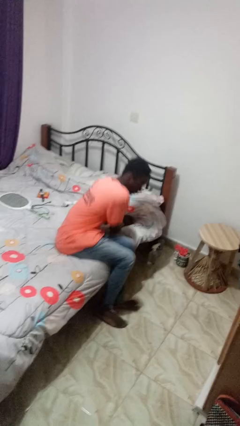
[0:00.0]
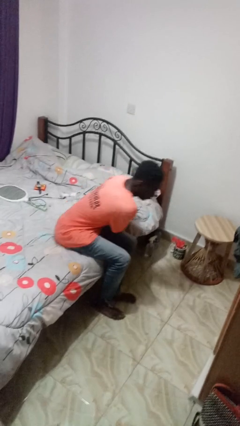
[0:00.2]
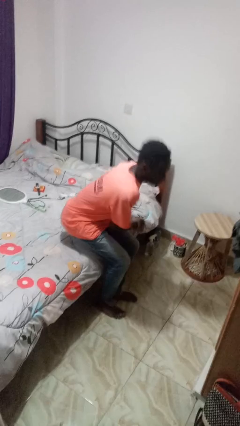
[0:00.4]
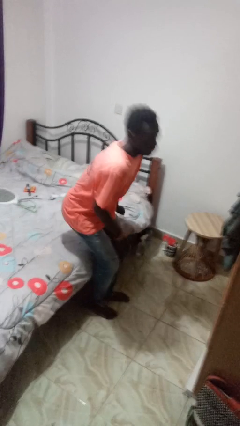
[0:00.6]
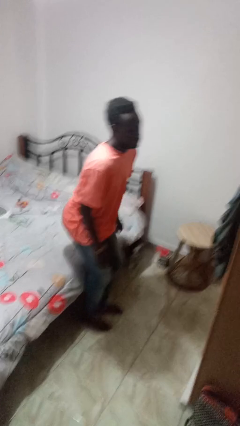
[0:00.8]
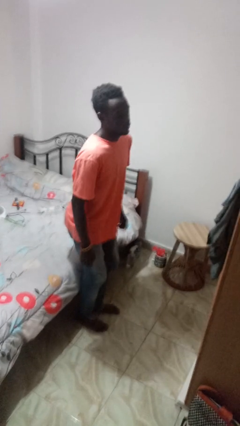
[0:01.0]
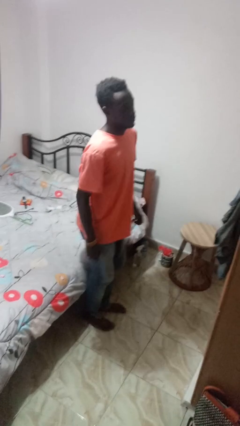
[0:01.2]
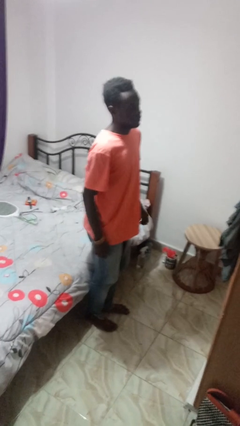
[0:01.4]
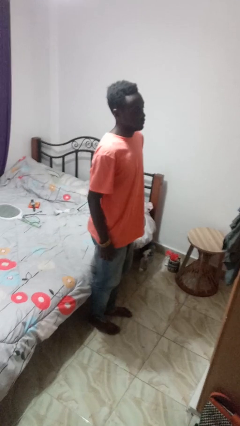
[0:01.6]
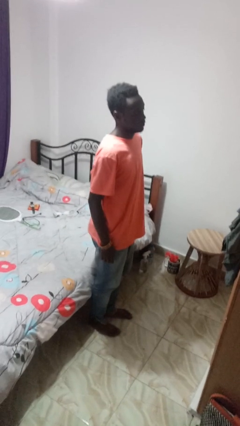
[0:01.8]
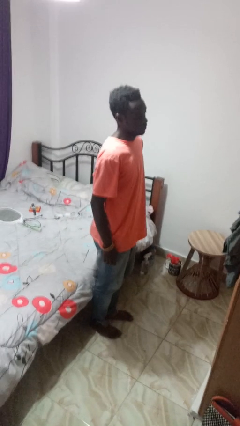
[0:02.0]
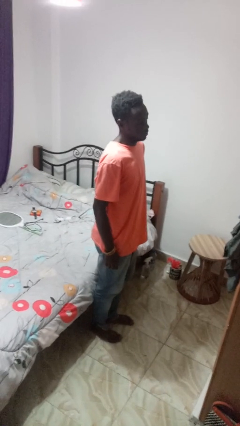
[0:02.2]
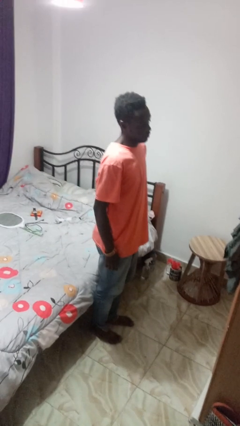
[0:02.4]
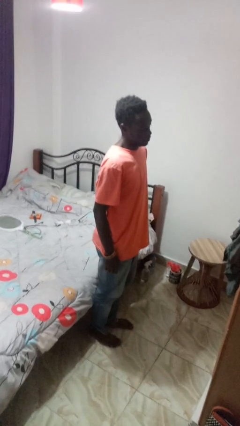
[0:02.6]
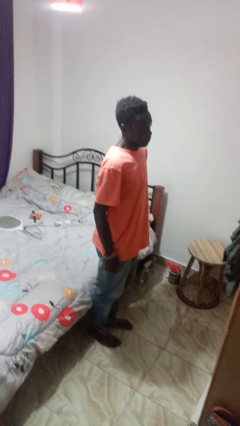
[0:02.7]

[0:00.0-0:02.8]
person stands up

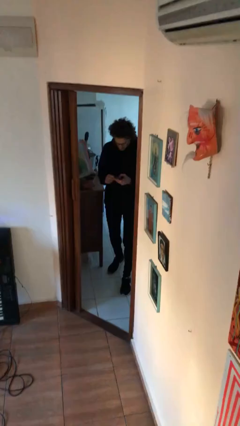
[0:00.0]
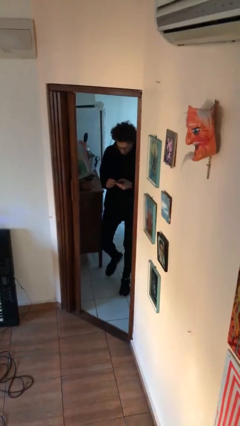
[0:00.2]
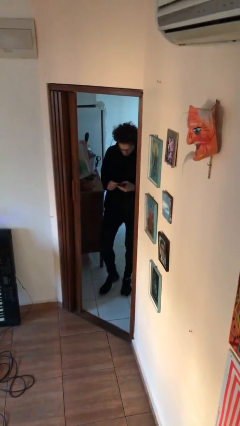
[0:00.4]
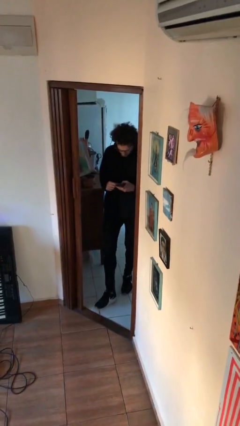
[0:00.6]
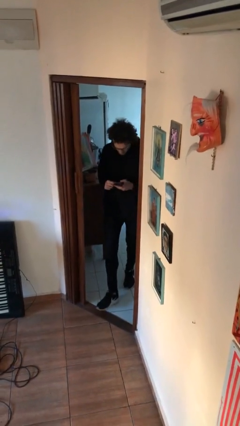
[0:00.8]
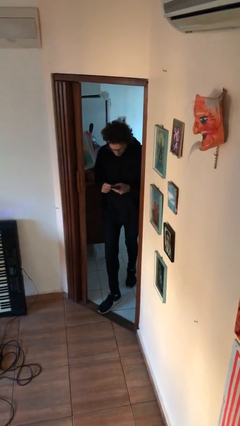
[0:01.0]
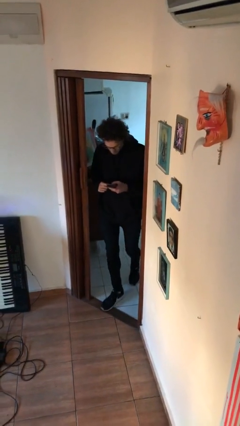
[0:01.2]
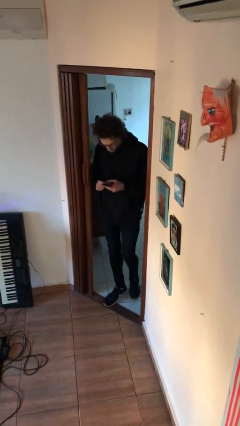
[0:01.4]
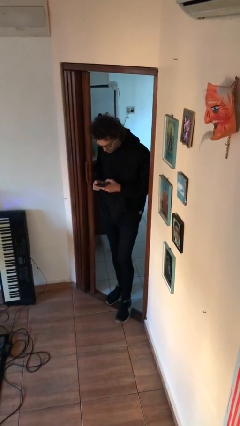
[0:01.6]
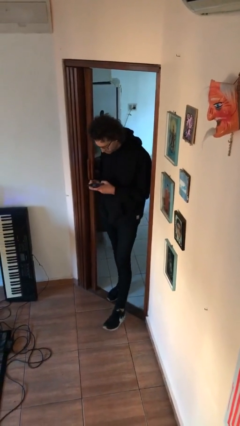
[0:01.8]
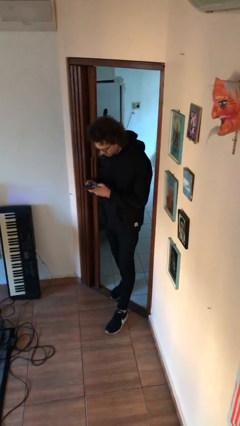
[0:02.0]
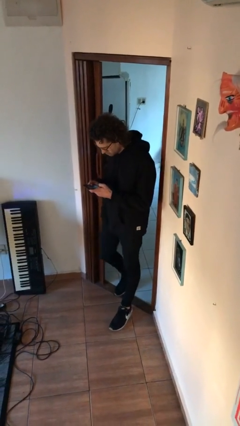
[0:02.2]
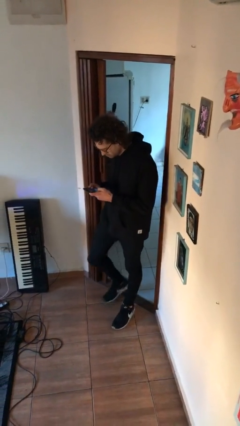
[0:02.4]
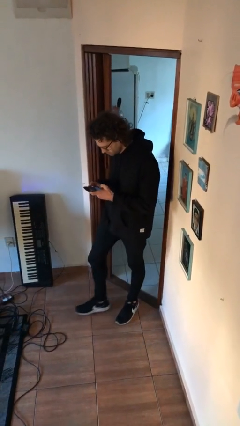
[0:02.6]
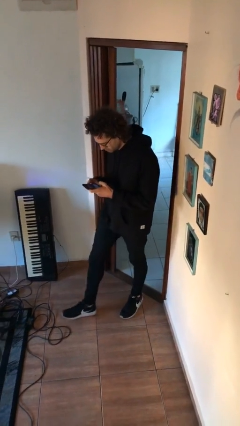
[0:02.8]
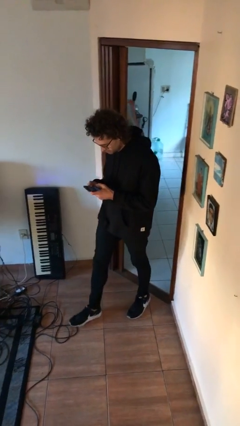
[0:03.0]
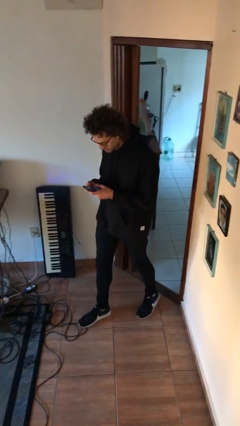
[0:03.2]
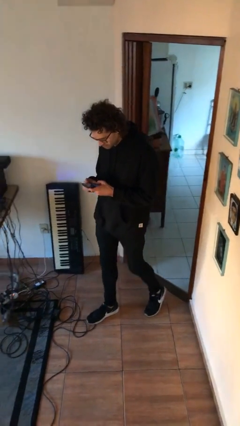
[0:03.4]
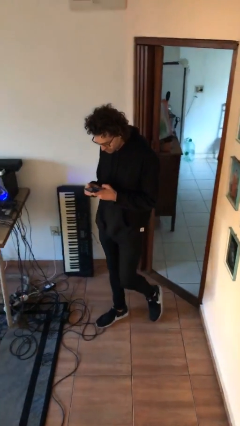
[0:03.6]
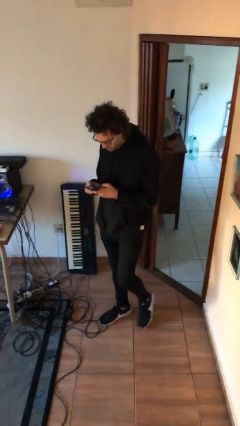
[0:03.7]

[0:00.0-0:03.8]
person enters scene through structure

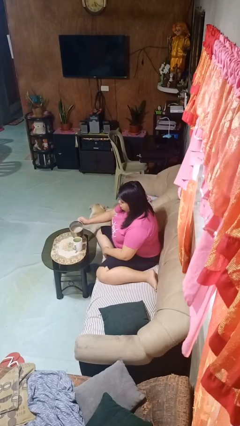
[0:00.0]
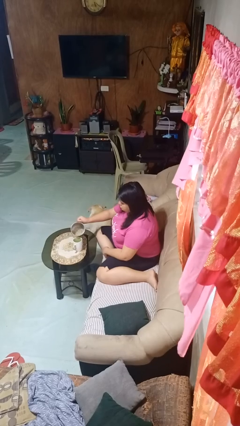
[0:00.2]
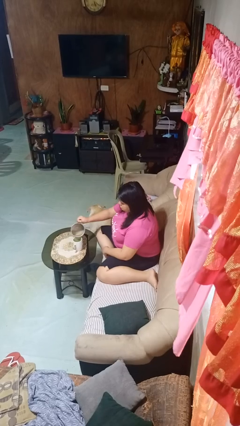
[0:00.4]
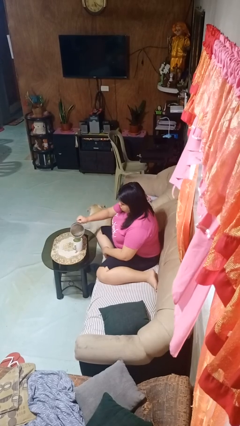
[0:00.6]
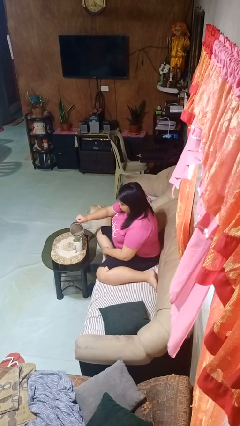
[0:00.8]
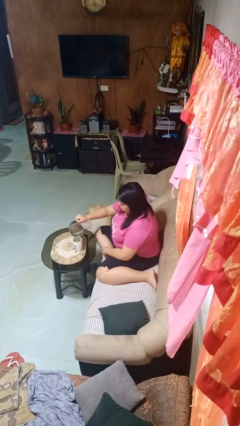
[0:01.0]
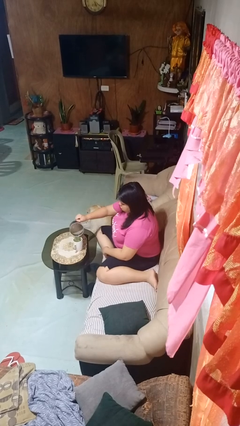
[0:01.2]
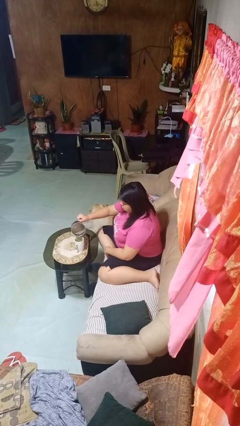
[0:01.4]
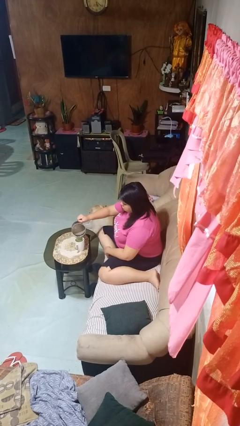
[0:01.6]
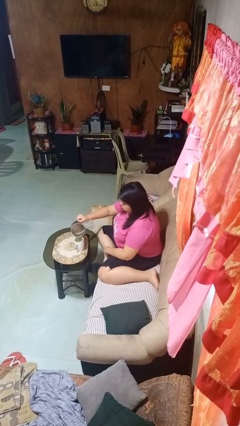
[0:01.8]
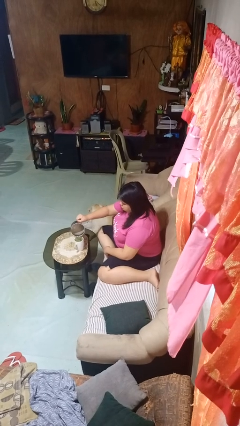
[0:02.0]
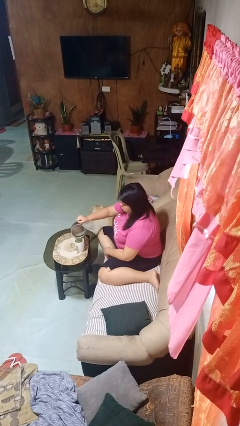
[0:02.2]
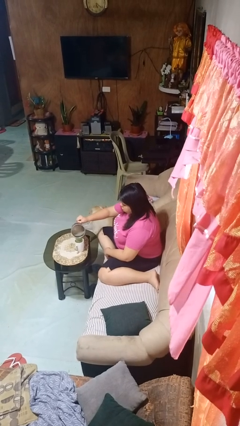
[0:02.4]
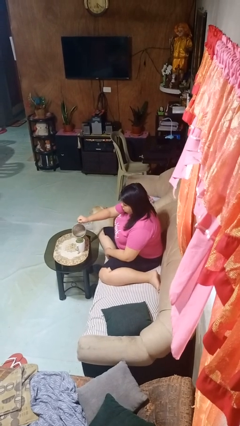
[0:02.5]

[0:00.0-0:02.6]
person pours coffee into mug

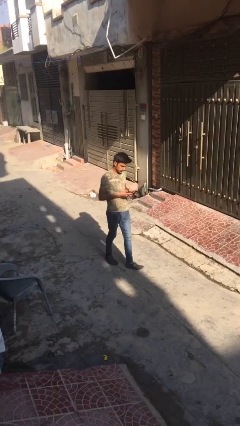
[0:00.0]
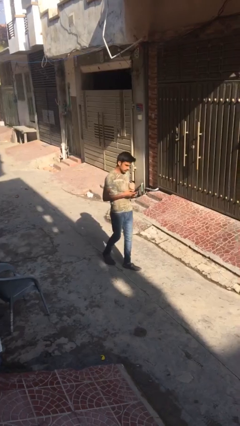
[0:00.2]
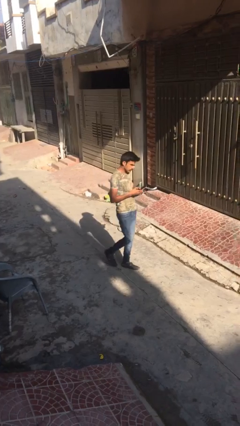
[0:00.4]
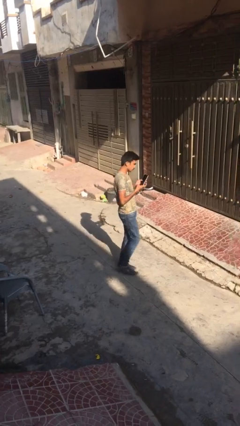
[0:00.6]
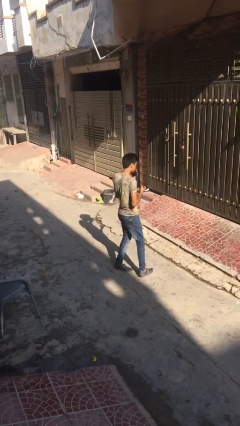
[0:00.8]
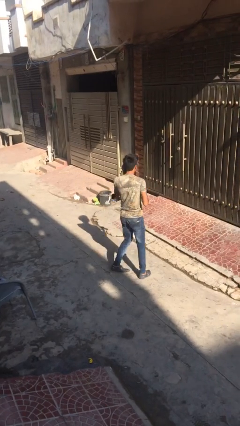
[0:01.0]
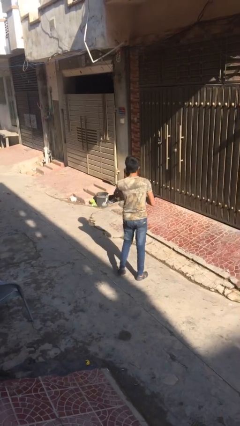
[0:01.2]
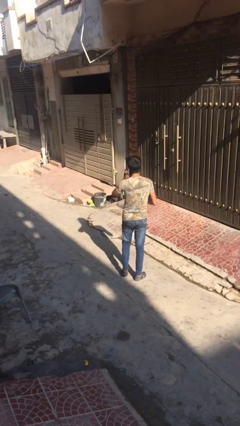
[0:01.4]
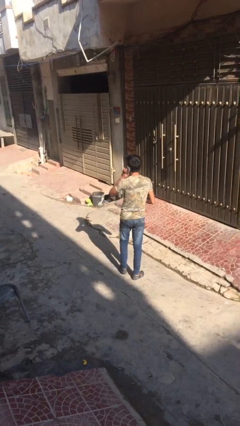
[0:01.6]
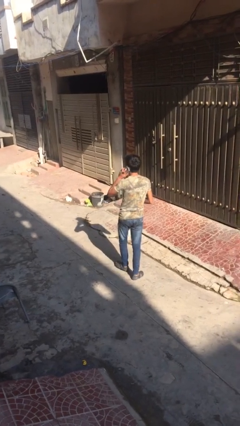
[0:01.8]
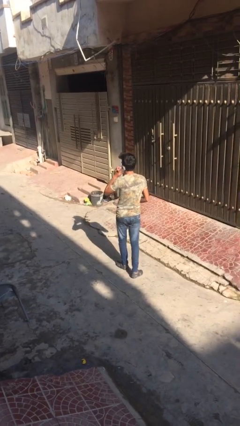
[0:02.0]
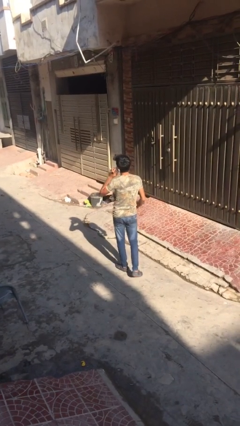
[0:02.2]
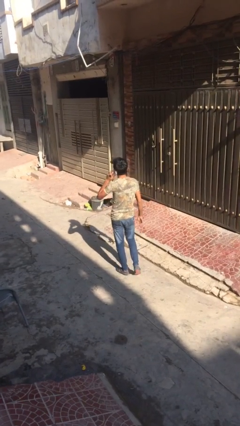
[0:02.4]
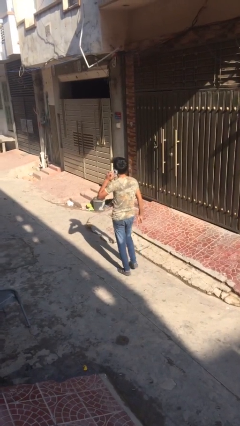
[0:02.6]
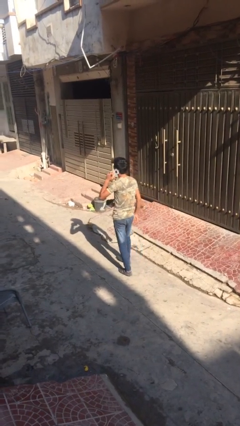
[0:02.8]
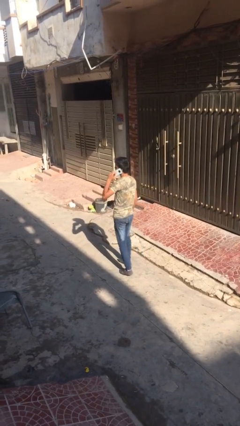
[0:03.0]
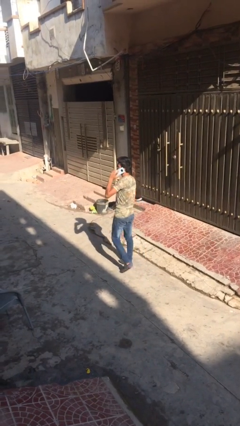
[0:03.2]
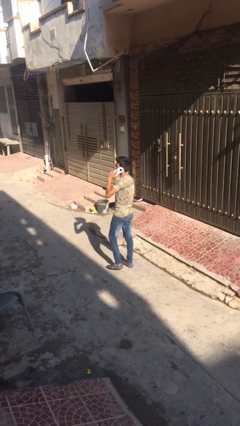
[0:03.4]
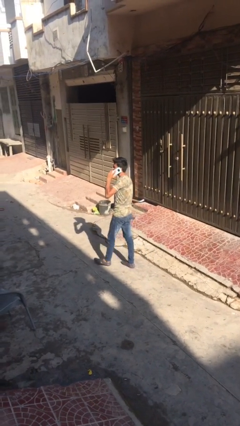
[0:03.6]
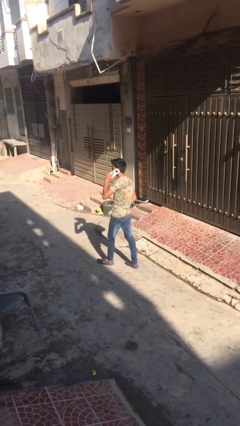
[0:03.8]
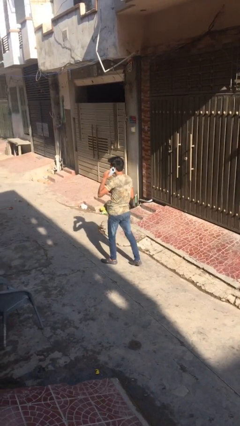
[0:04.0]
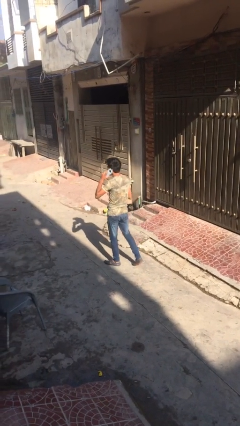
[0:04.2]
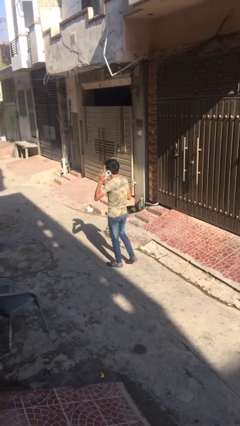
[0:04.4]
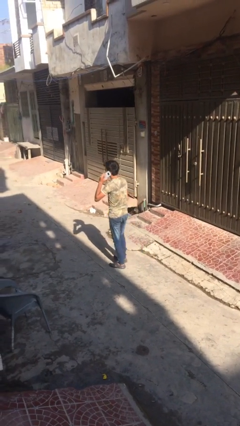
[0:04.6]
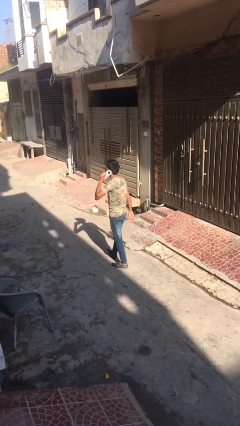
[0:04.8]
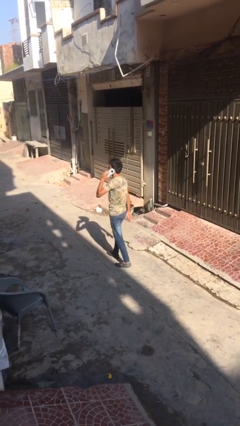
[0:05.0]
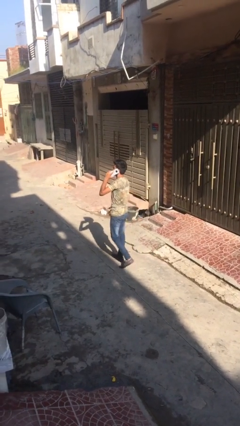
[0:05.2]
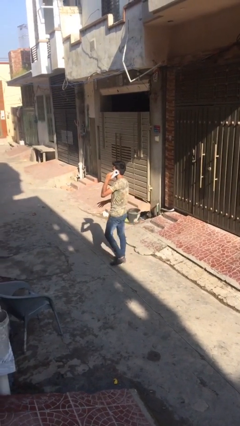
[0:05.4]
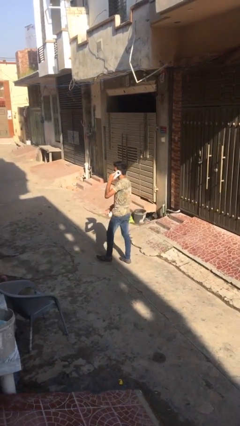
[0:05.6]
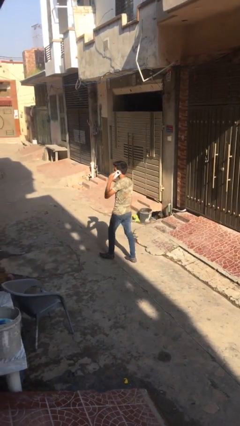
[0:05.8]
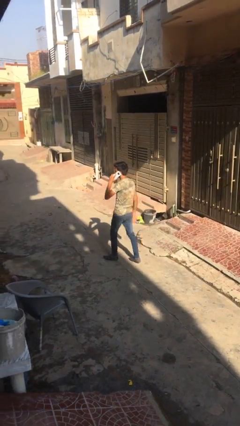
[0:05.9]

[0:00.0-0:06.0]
person talks on phone

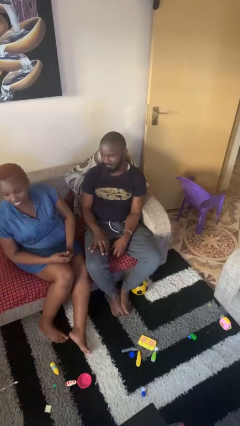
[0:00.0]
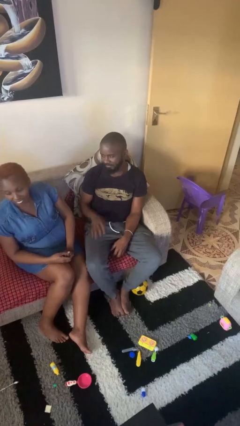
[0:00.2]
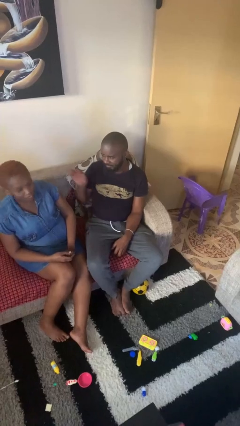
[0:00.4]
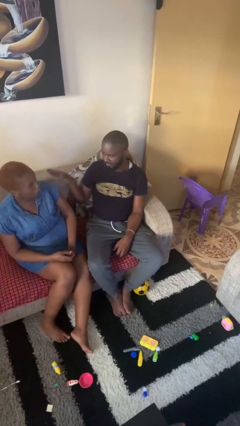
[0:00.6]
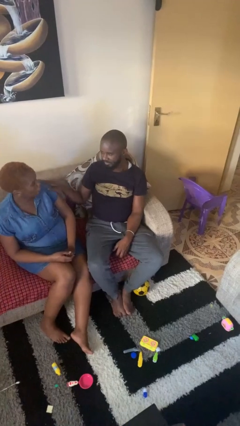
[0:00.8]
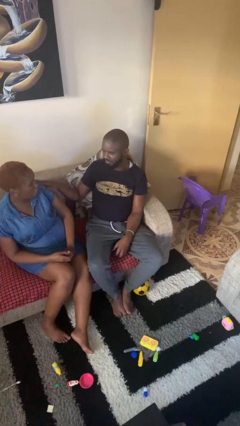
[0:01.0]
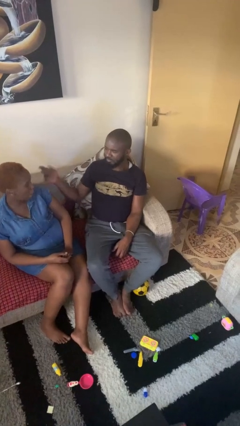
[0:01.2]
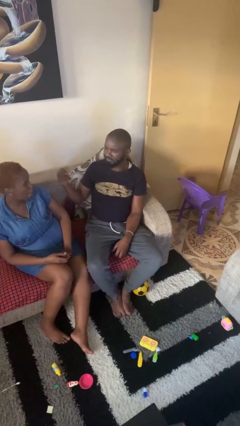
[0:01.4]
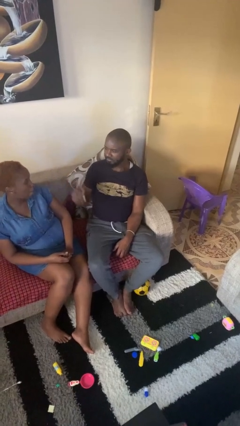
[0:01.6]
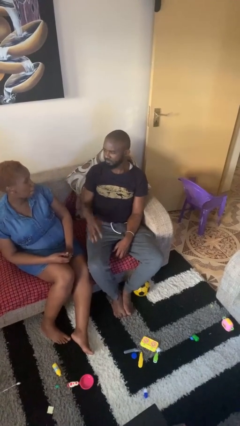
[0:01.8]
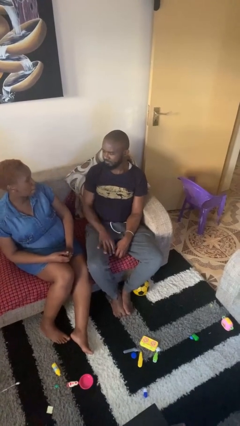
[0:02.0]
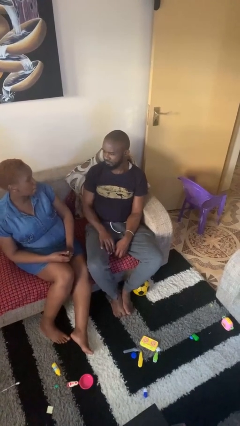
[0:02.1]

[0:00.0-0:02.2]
person shoves person
